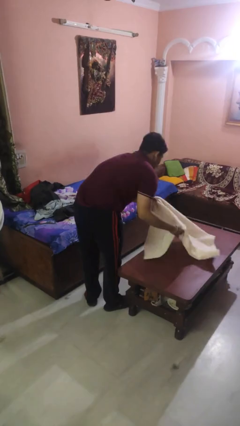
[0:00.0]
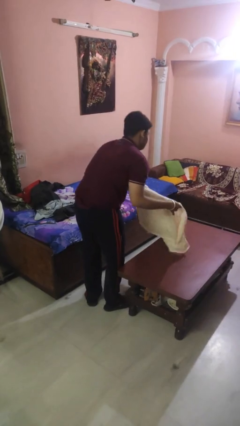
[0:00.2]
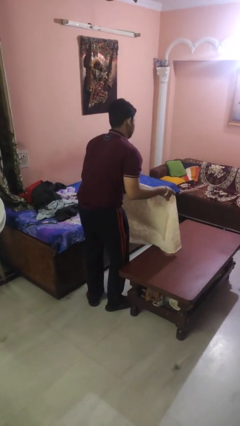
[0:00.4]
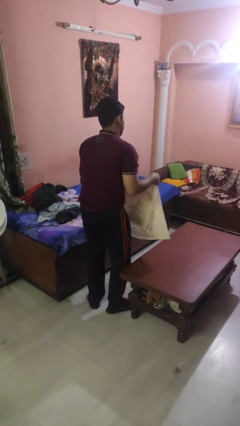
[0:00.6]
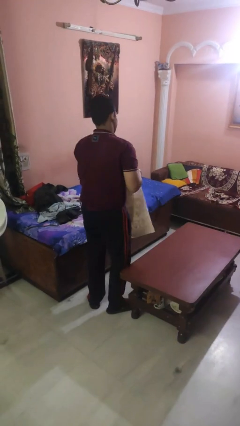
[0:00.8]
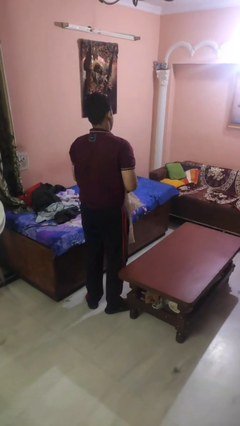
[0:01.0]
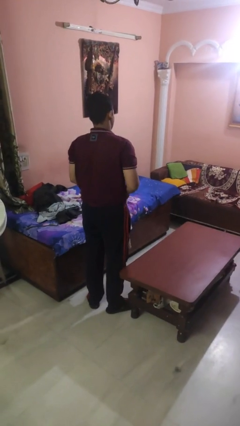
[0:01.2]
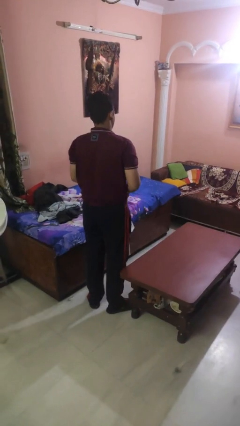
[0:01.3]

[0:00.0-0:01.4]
person folds tablecloth

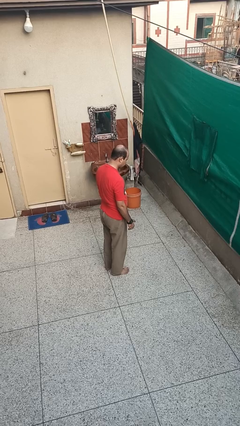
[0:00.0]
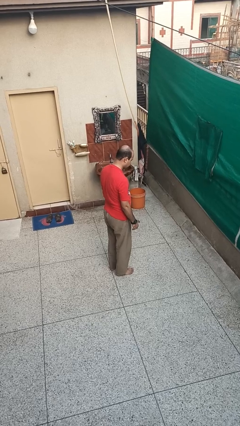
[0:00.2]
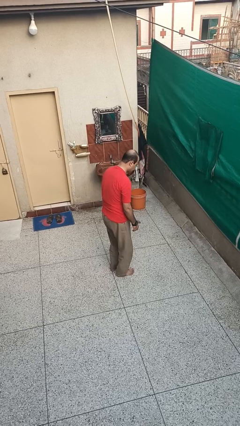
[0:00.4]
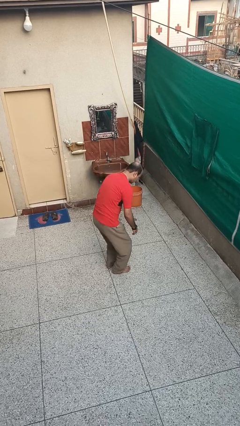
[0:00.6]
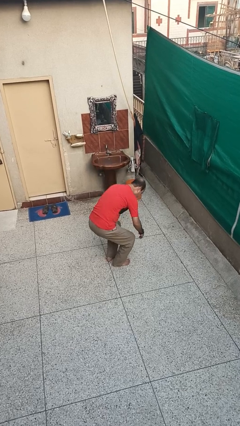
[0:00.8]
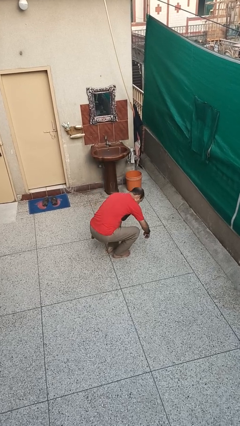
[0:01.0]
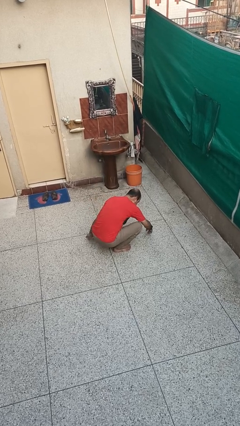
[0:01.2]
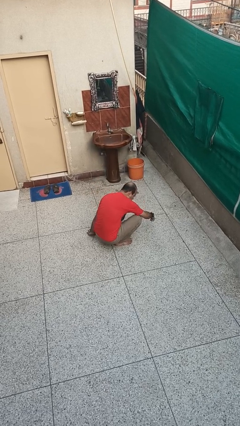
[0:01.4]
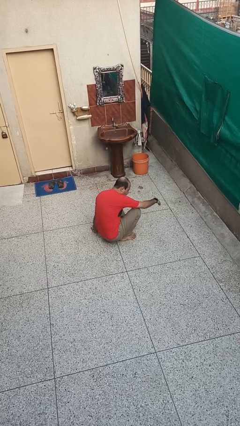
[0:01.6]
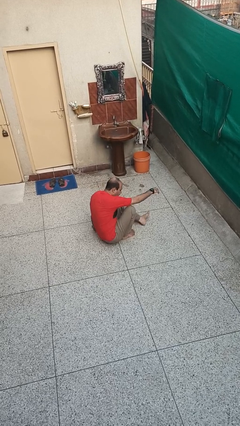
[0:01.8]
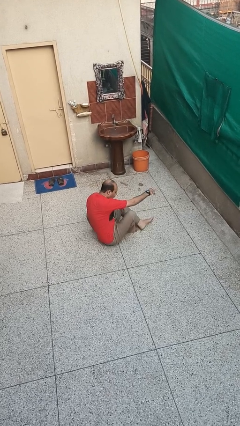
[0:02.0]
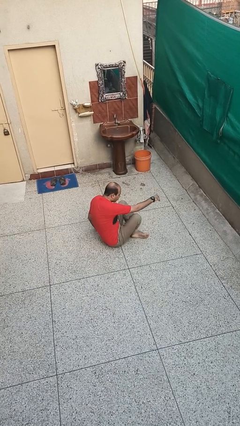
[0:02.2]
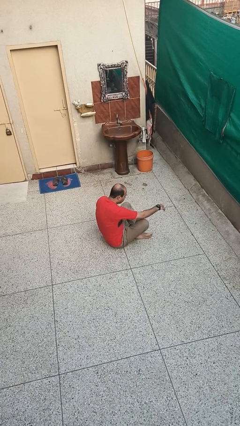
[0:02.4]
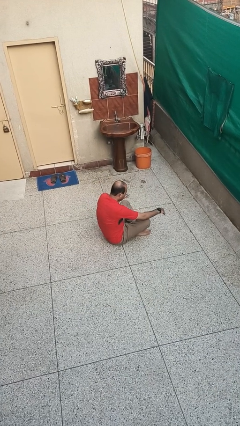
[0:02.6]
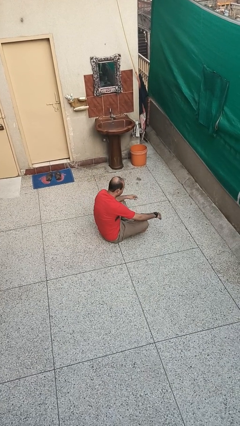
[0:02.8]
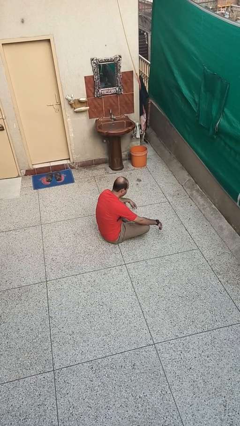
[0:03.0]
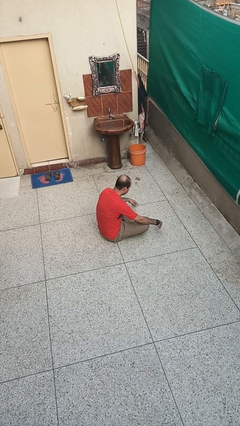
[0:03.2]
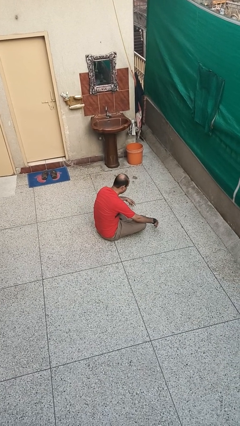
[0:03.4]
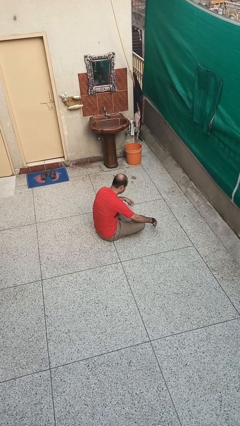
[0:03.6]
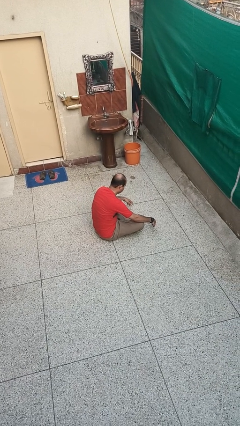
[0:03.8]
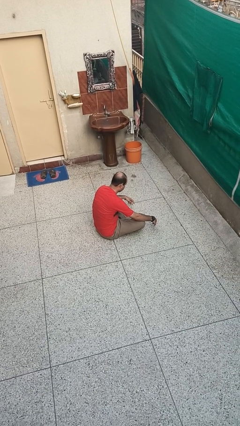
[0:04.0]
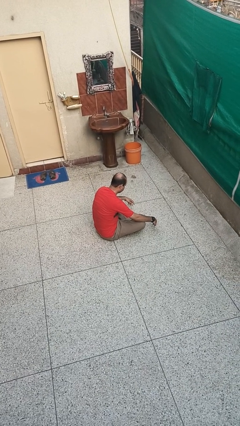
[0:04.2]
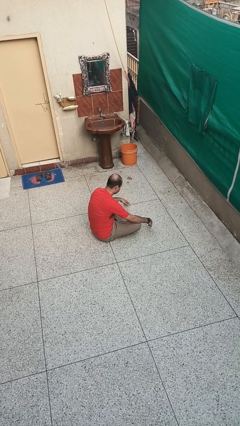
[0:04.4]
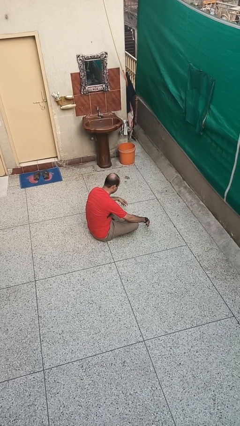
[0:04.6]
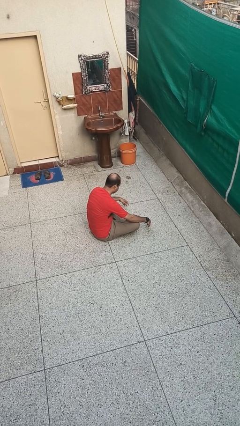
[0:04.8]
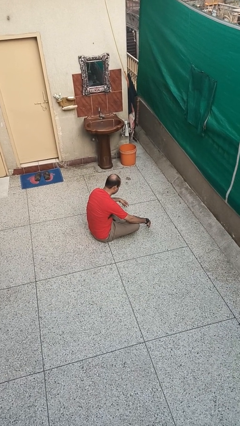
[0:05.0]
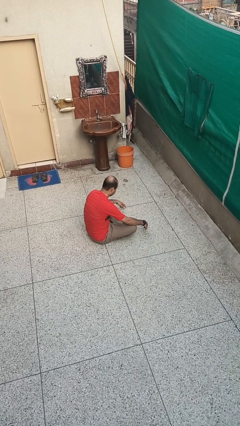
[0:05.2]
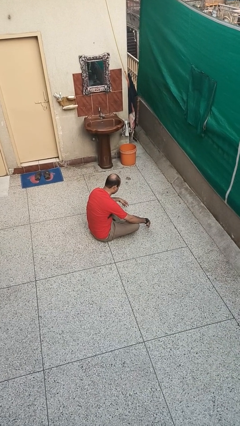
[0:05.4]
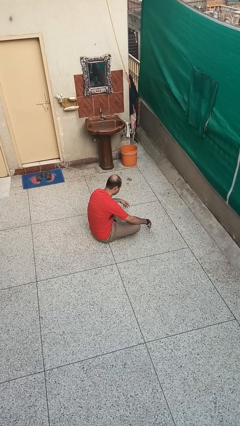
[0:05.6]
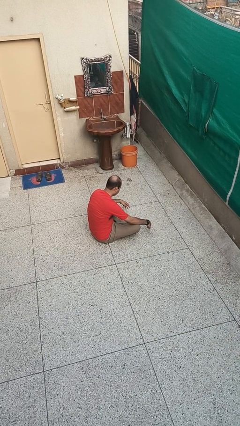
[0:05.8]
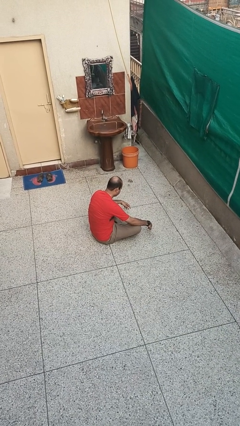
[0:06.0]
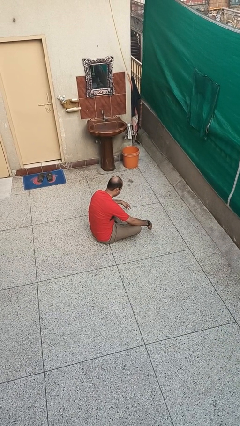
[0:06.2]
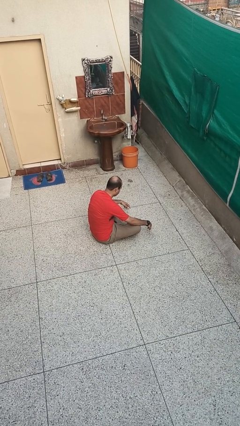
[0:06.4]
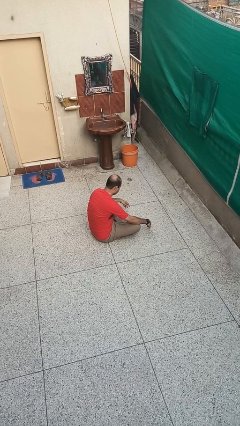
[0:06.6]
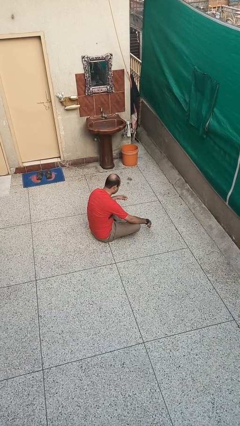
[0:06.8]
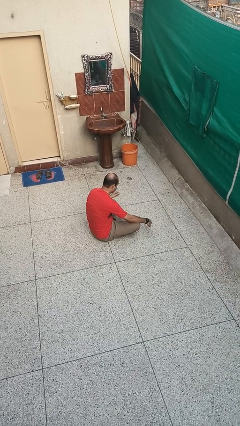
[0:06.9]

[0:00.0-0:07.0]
person sits crisscross

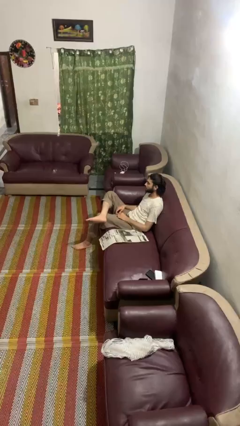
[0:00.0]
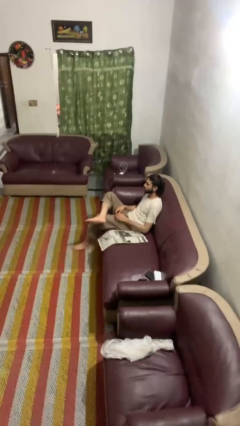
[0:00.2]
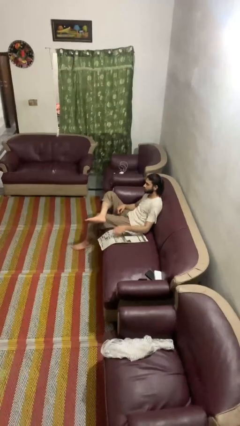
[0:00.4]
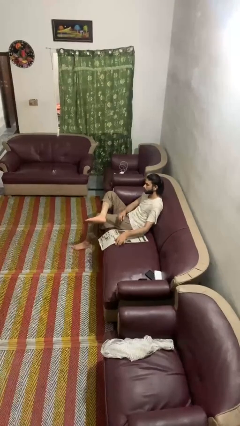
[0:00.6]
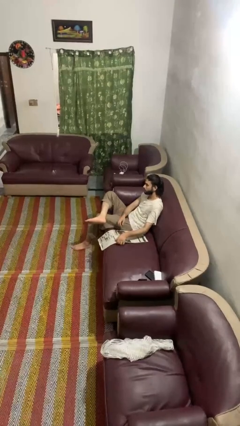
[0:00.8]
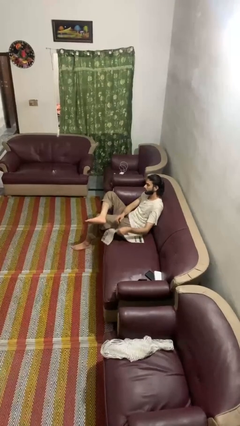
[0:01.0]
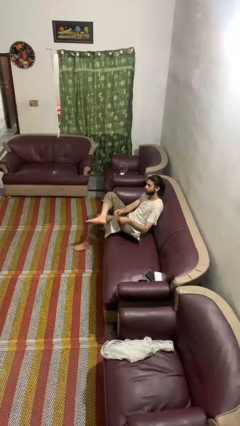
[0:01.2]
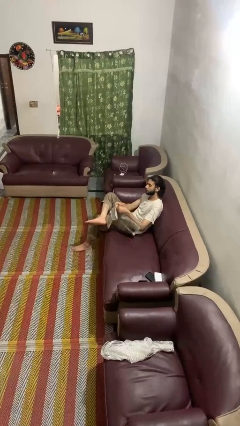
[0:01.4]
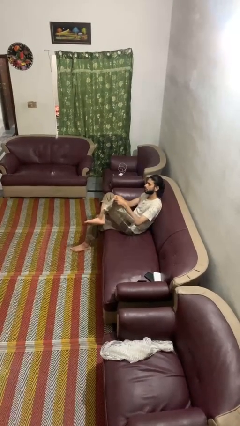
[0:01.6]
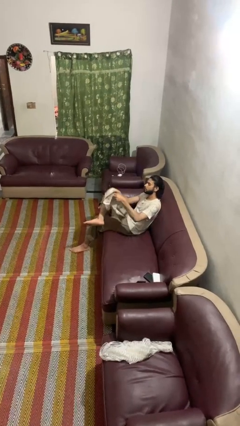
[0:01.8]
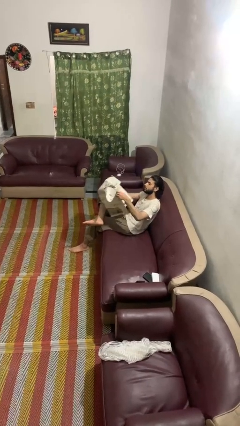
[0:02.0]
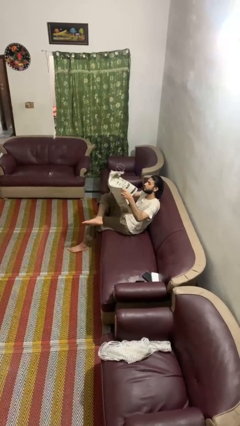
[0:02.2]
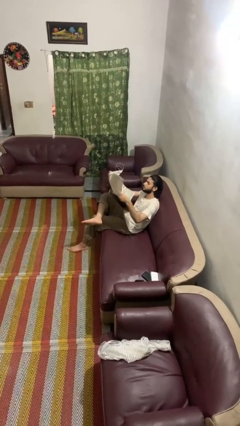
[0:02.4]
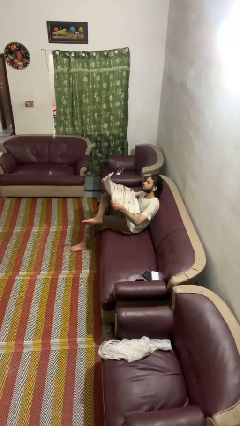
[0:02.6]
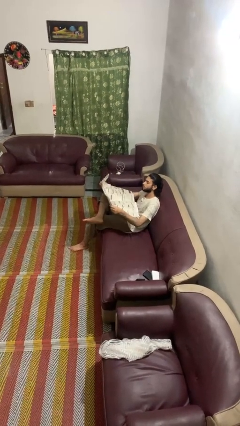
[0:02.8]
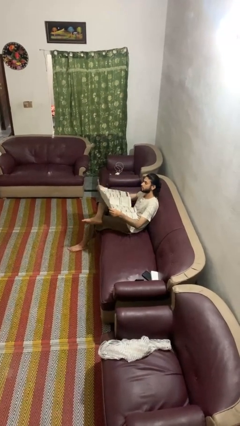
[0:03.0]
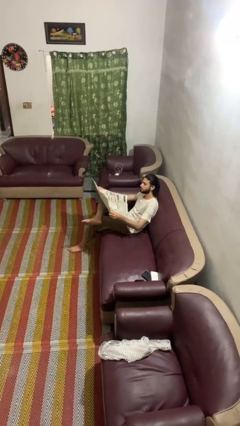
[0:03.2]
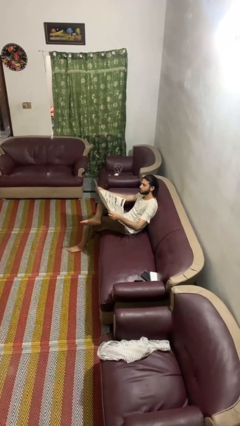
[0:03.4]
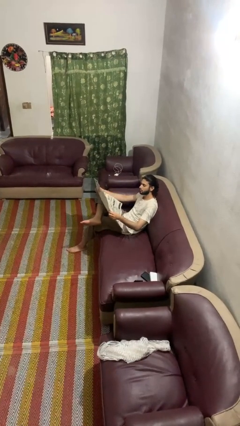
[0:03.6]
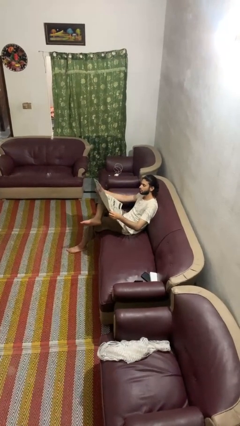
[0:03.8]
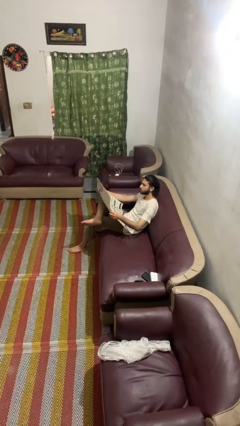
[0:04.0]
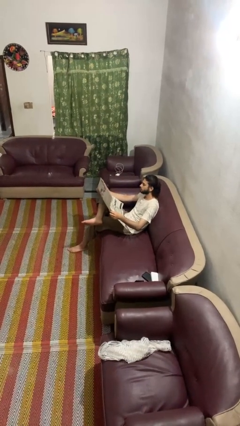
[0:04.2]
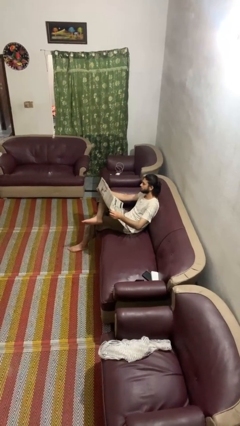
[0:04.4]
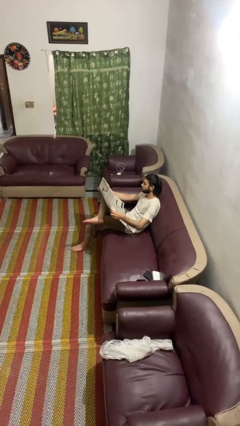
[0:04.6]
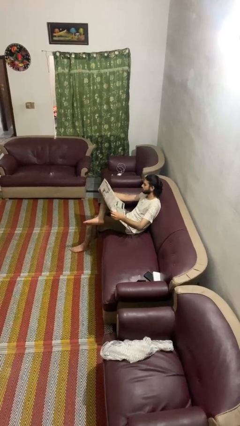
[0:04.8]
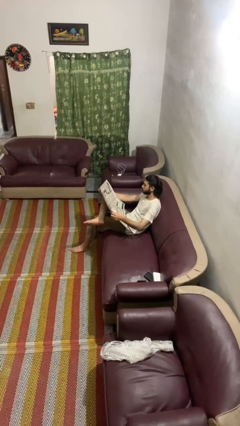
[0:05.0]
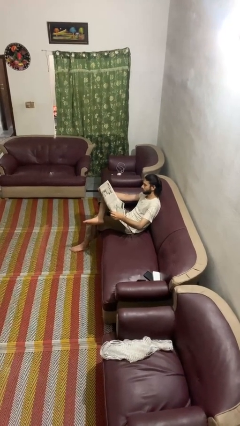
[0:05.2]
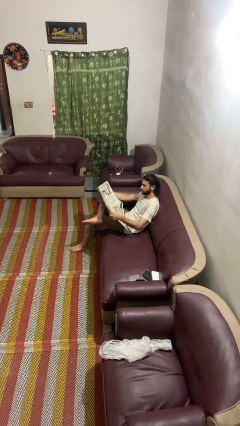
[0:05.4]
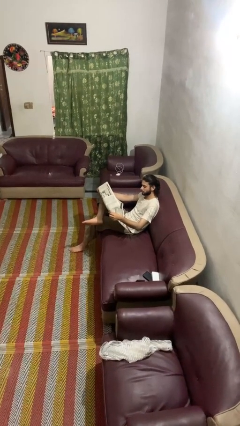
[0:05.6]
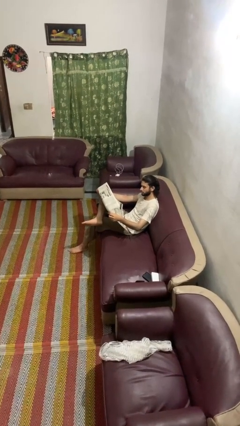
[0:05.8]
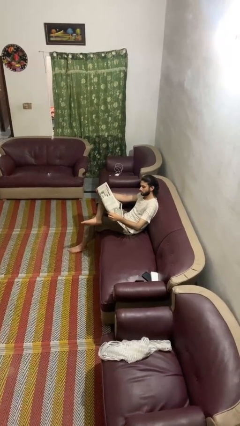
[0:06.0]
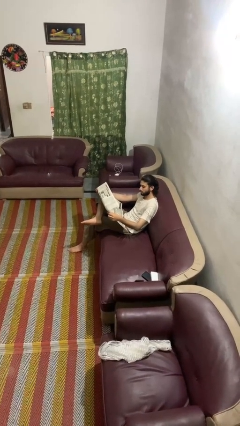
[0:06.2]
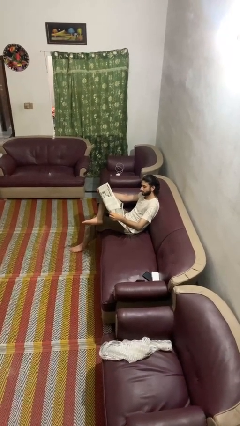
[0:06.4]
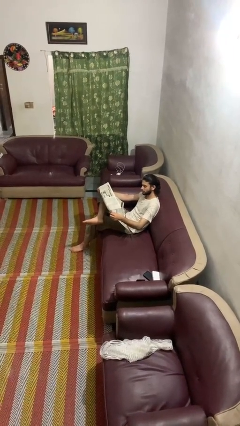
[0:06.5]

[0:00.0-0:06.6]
person reads newspaper

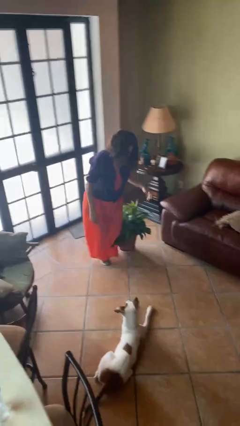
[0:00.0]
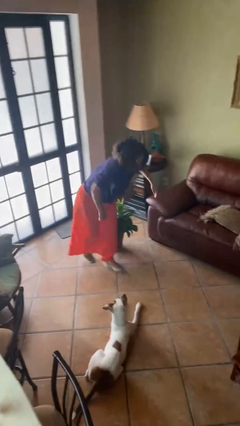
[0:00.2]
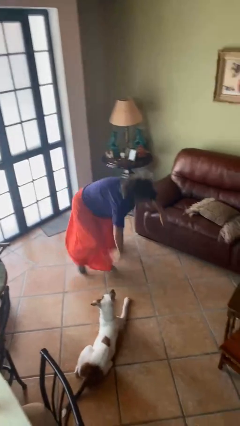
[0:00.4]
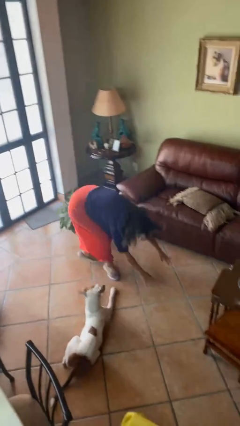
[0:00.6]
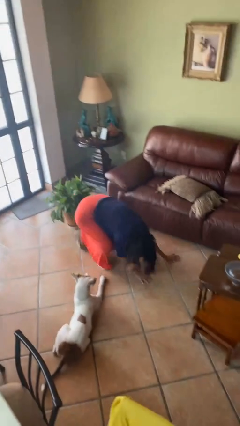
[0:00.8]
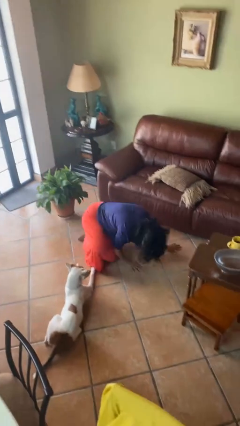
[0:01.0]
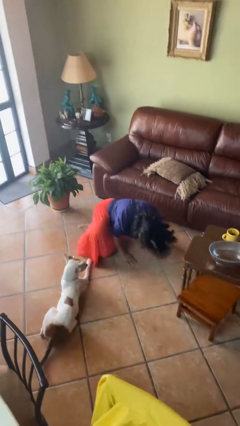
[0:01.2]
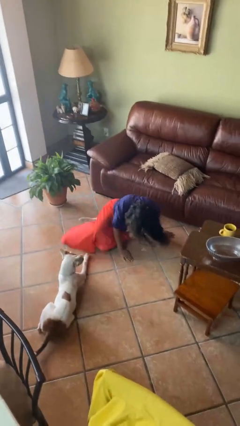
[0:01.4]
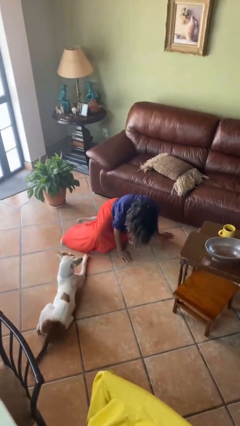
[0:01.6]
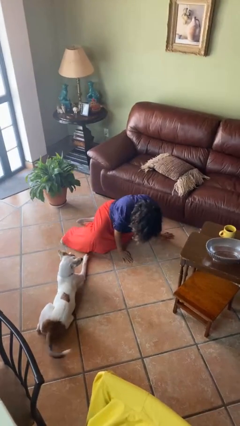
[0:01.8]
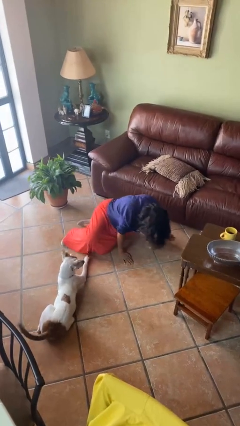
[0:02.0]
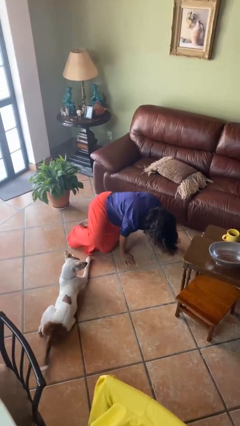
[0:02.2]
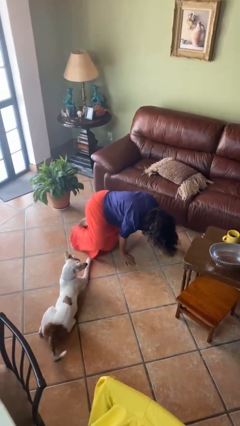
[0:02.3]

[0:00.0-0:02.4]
person trips on object on floor

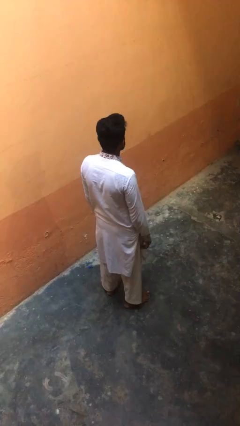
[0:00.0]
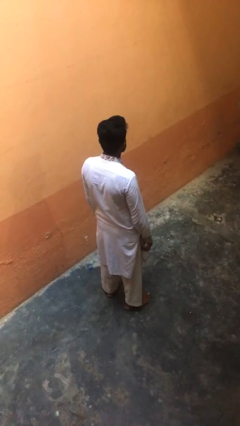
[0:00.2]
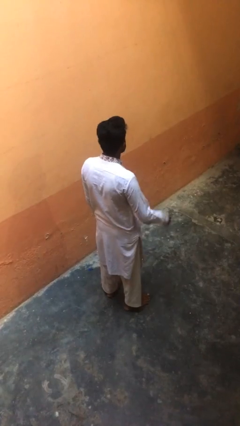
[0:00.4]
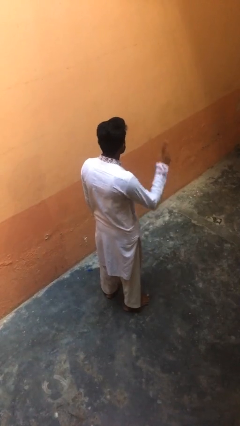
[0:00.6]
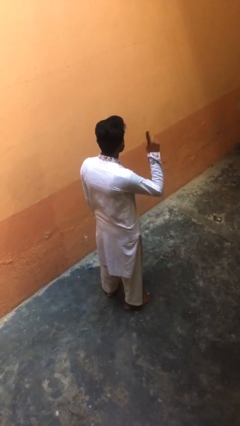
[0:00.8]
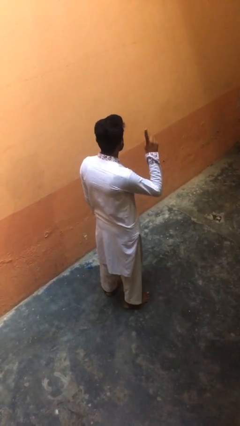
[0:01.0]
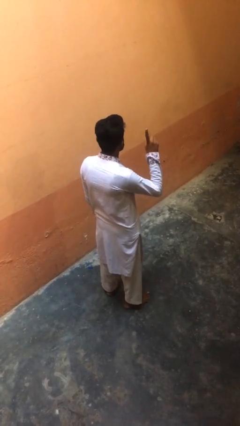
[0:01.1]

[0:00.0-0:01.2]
person gestures number one
